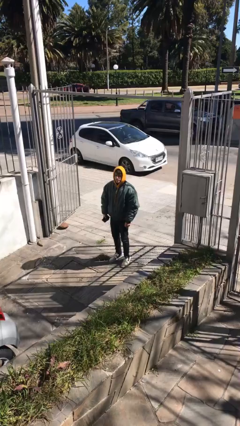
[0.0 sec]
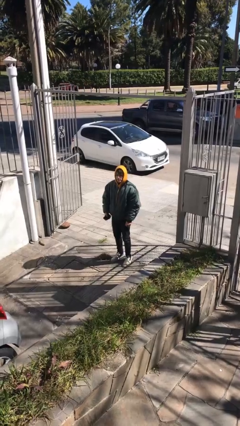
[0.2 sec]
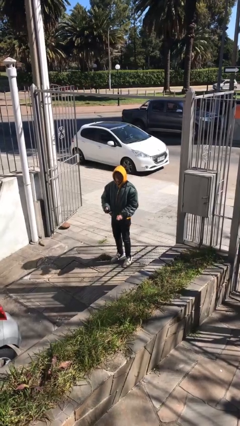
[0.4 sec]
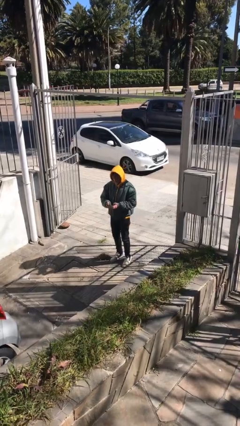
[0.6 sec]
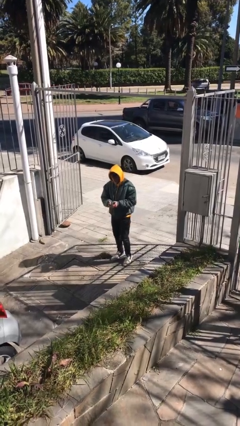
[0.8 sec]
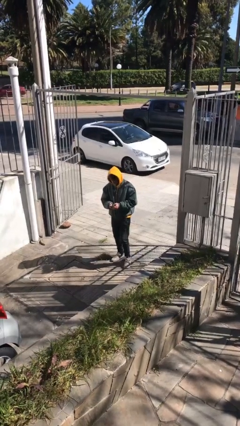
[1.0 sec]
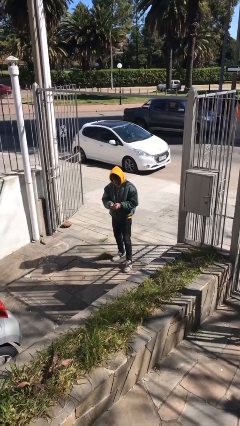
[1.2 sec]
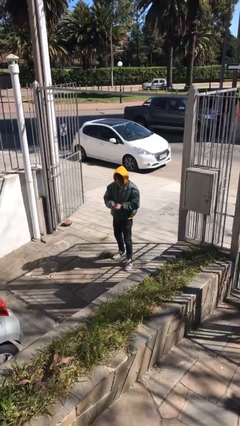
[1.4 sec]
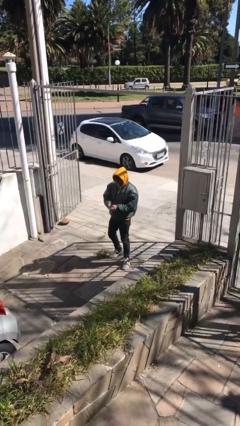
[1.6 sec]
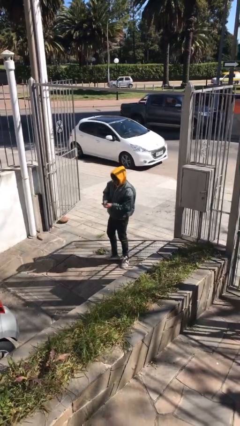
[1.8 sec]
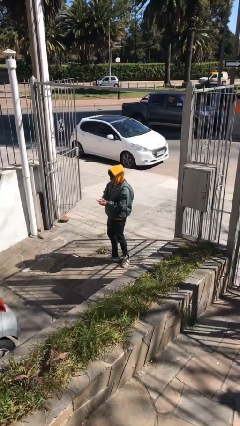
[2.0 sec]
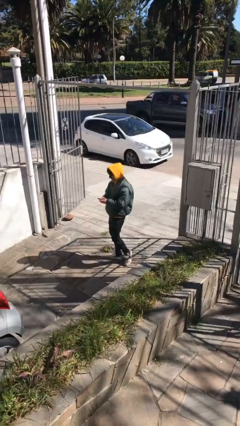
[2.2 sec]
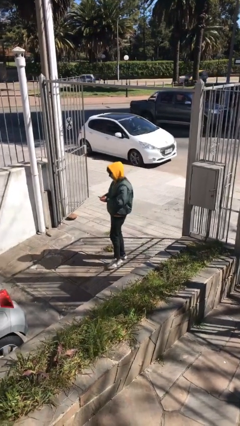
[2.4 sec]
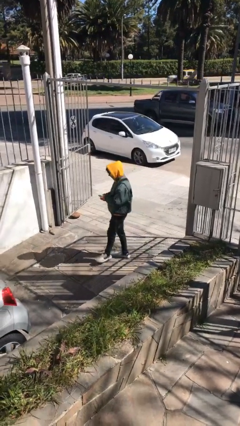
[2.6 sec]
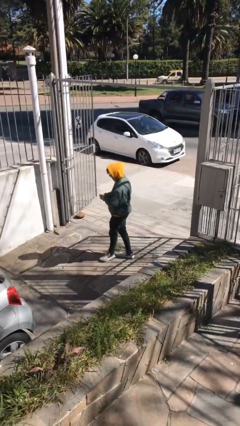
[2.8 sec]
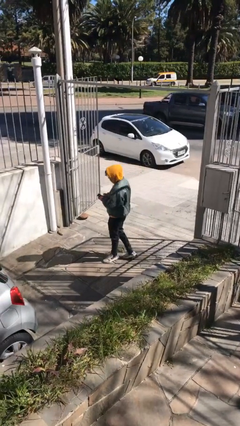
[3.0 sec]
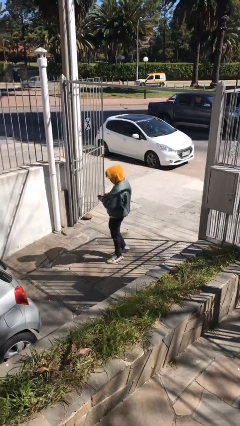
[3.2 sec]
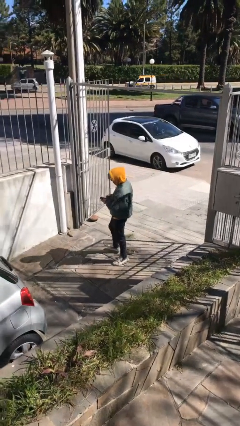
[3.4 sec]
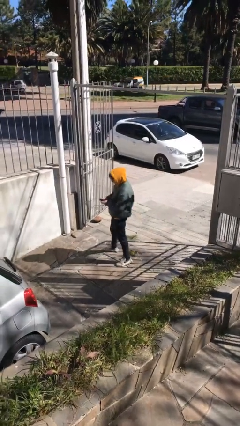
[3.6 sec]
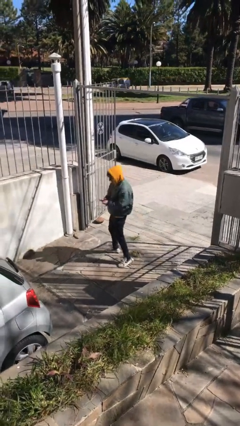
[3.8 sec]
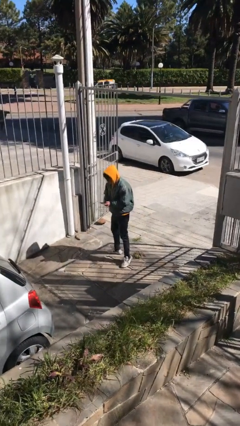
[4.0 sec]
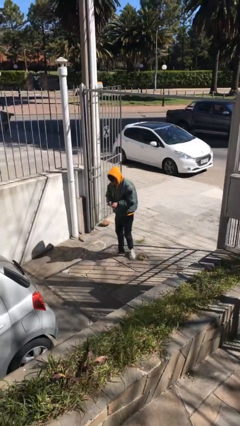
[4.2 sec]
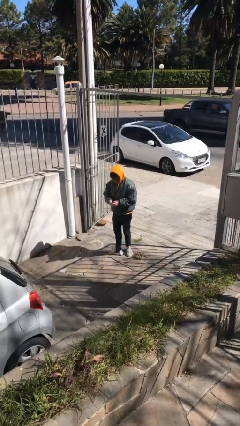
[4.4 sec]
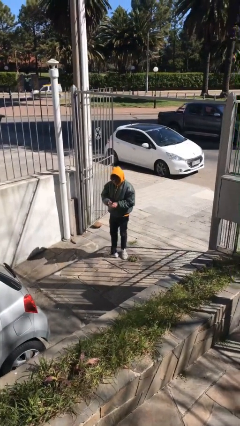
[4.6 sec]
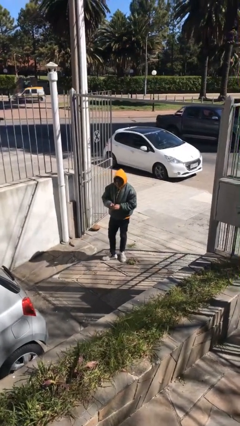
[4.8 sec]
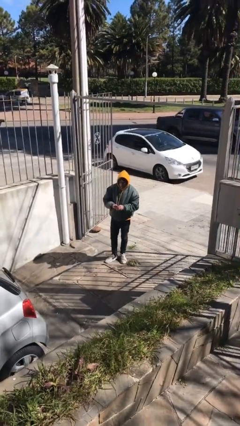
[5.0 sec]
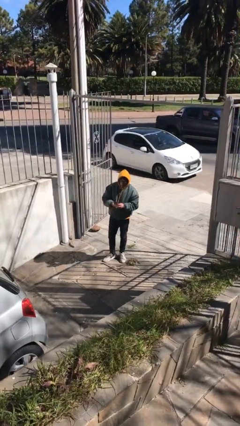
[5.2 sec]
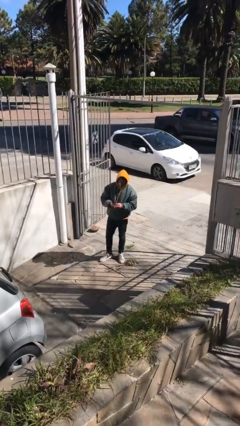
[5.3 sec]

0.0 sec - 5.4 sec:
person texts on phone

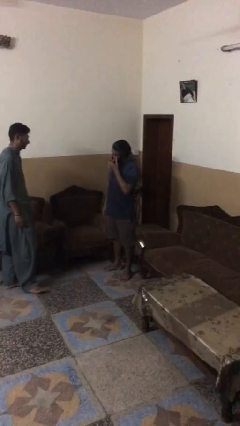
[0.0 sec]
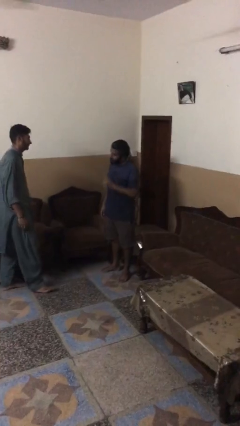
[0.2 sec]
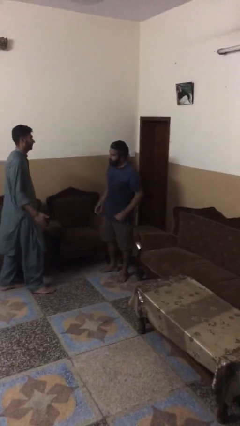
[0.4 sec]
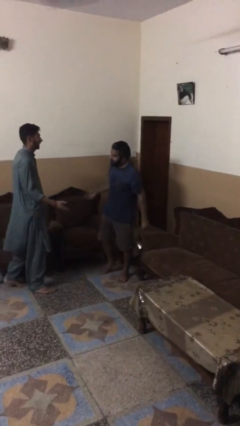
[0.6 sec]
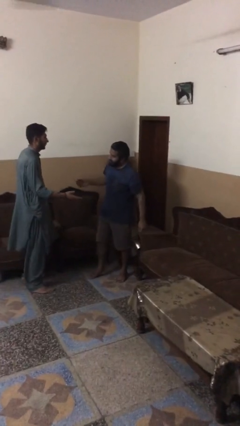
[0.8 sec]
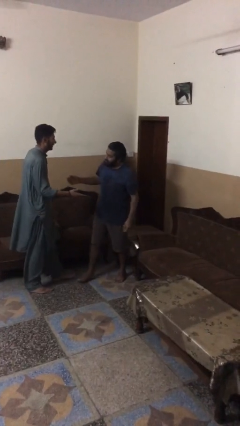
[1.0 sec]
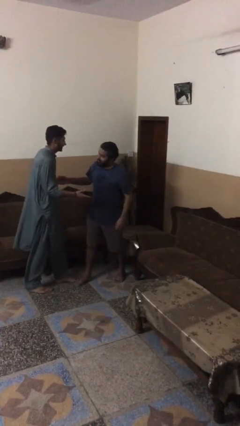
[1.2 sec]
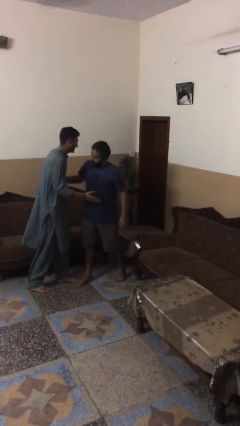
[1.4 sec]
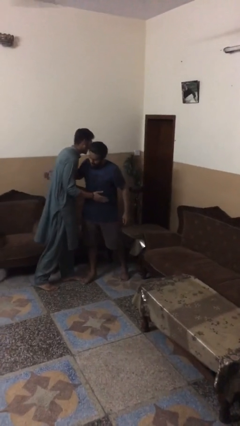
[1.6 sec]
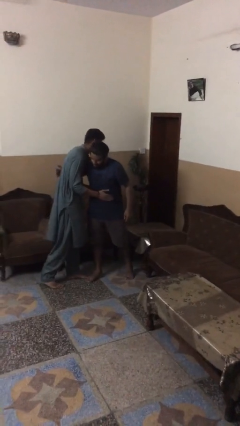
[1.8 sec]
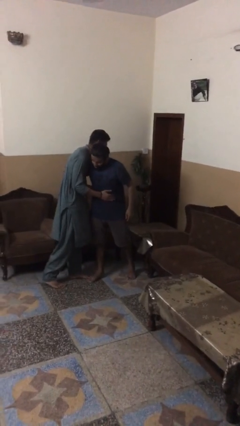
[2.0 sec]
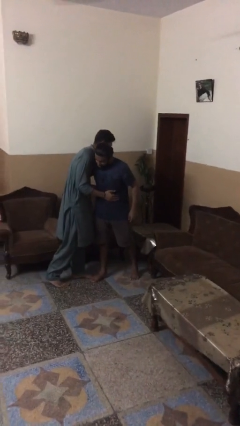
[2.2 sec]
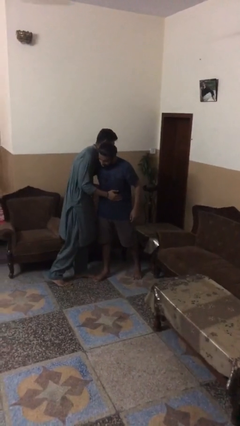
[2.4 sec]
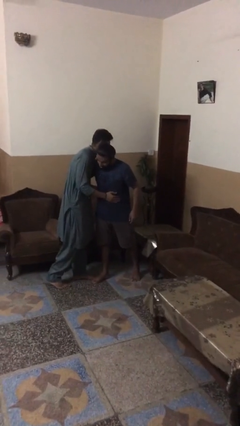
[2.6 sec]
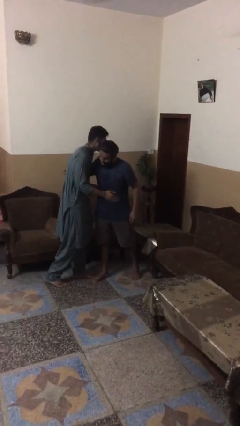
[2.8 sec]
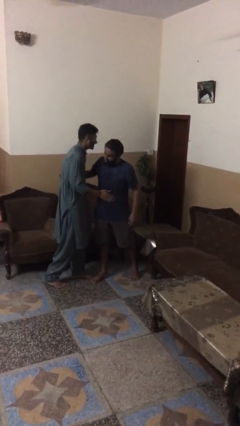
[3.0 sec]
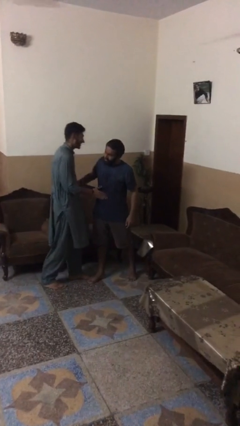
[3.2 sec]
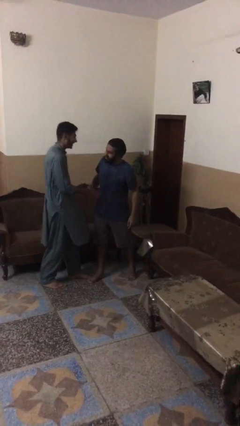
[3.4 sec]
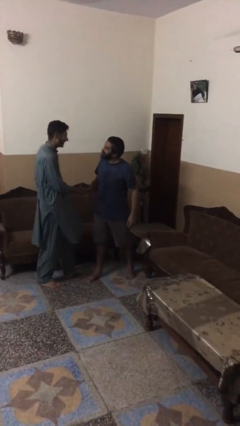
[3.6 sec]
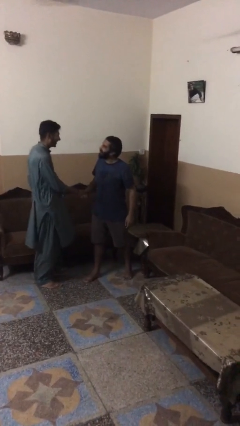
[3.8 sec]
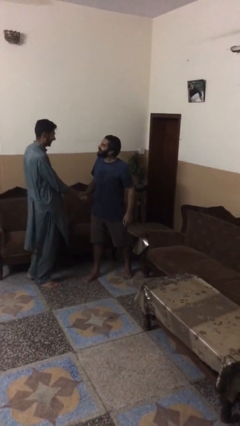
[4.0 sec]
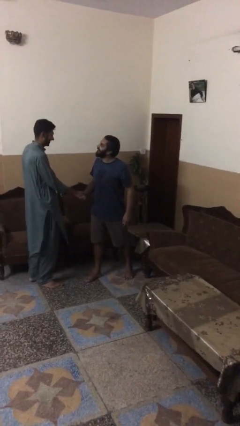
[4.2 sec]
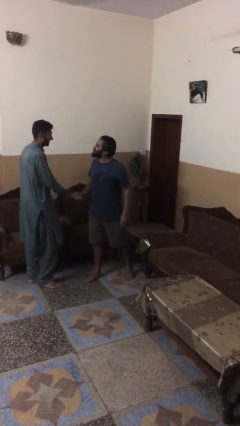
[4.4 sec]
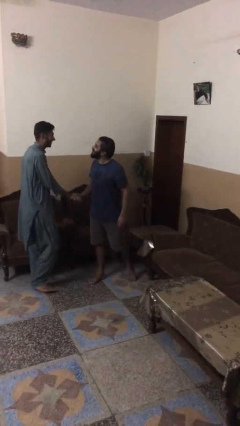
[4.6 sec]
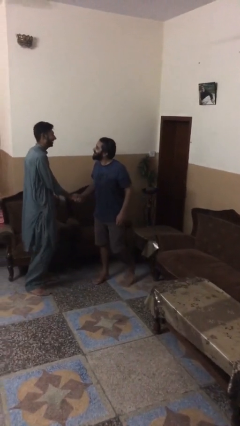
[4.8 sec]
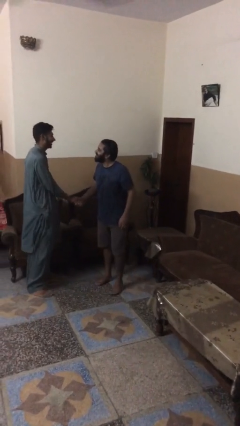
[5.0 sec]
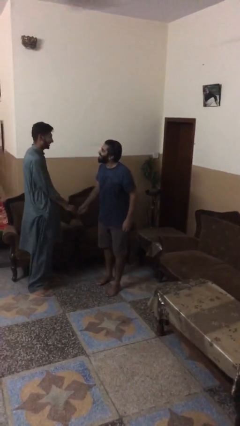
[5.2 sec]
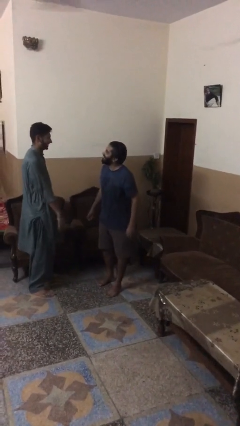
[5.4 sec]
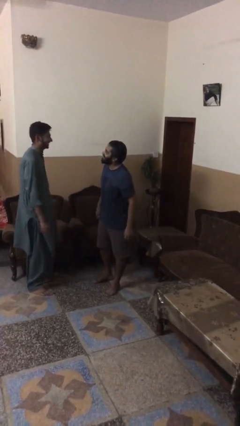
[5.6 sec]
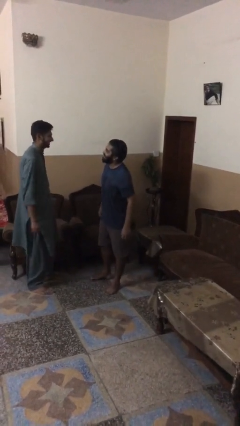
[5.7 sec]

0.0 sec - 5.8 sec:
person embraces person

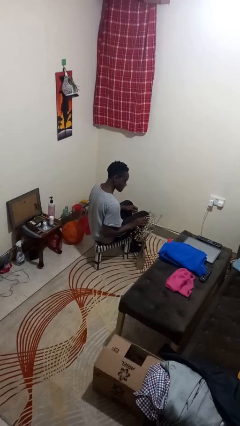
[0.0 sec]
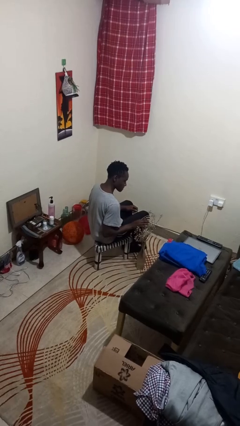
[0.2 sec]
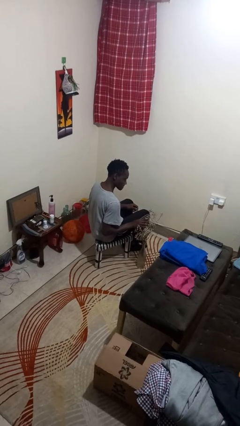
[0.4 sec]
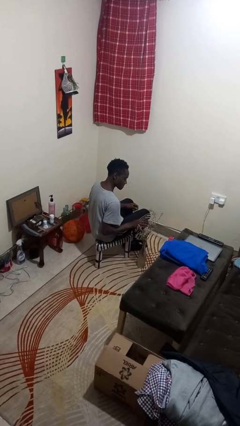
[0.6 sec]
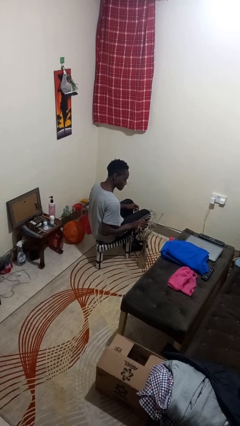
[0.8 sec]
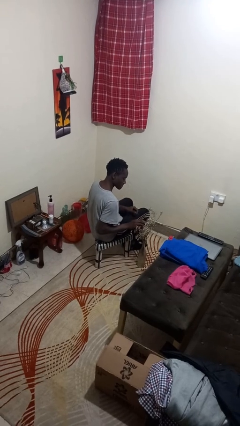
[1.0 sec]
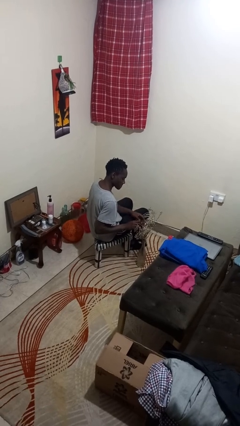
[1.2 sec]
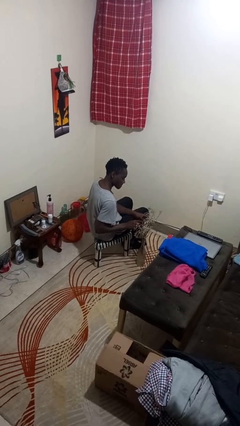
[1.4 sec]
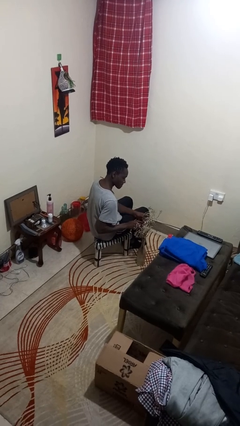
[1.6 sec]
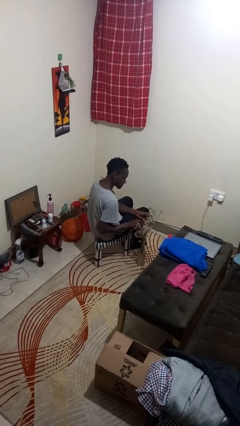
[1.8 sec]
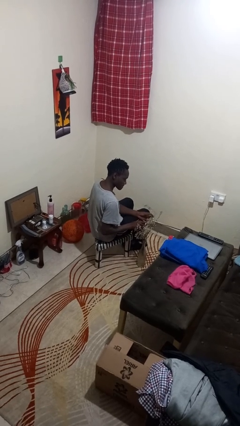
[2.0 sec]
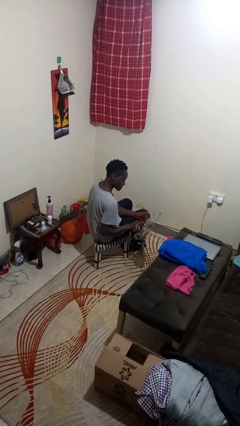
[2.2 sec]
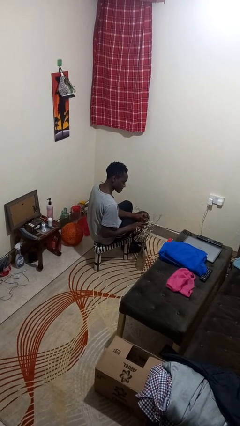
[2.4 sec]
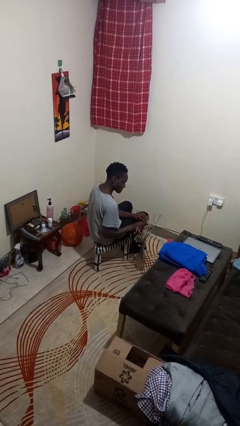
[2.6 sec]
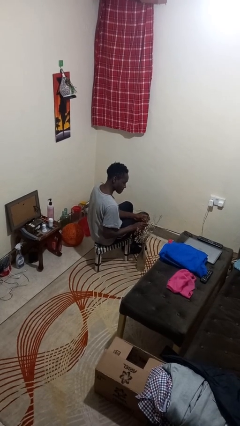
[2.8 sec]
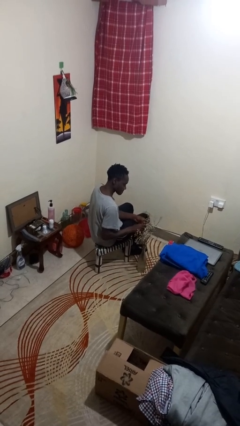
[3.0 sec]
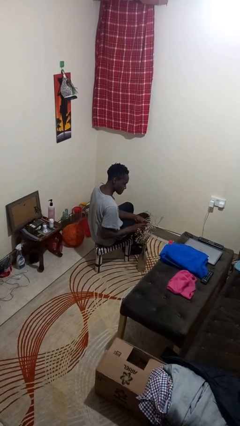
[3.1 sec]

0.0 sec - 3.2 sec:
person arranges flowers in vase

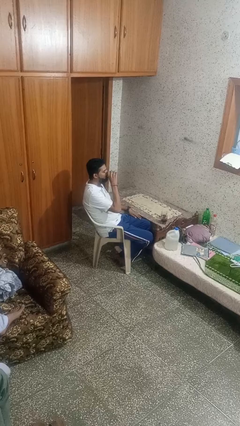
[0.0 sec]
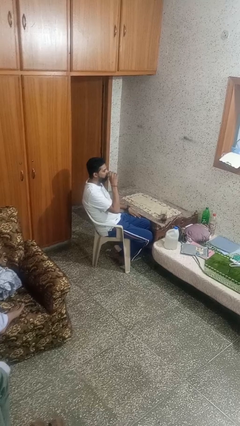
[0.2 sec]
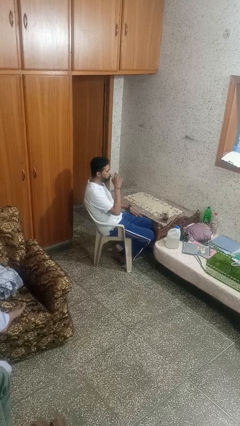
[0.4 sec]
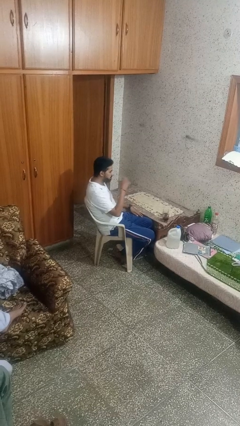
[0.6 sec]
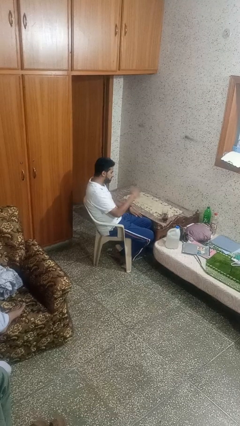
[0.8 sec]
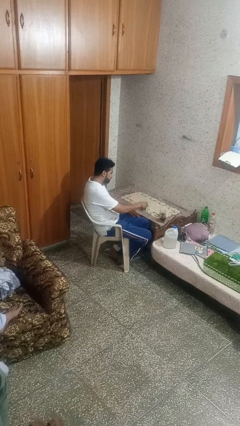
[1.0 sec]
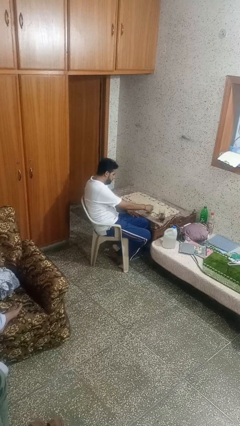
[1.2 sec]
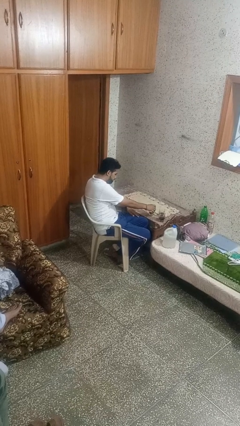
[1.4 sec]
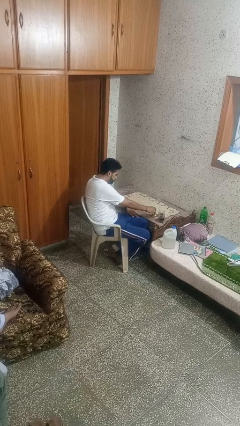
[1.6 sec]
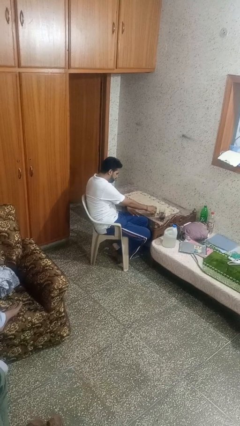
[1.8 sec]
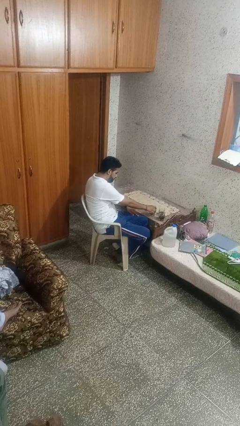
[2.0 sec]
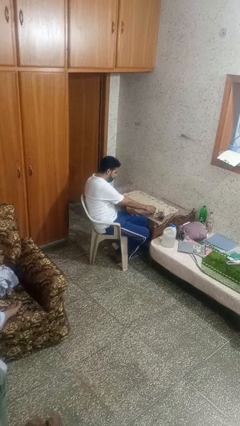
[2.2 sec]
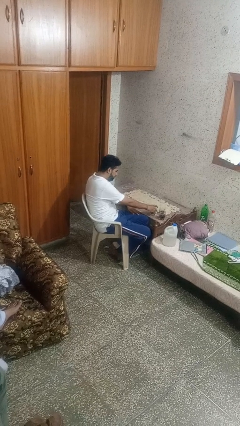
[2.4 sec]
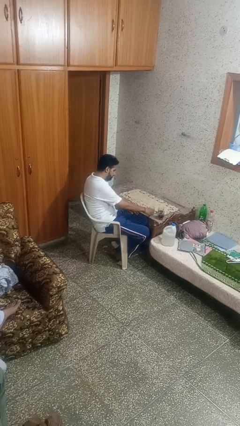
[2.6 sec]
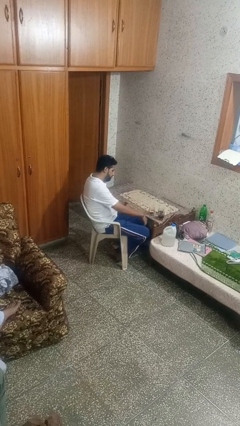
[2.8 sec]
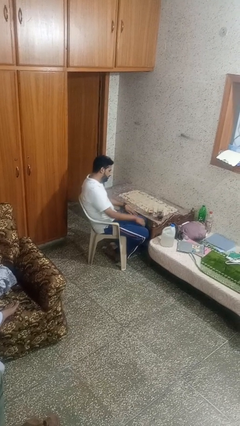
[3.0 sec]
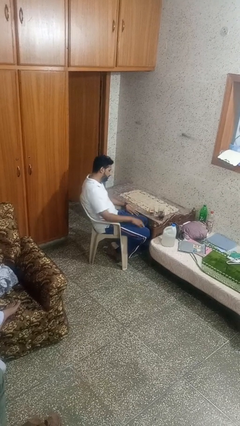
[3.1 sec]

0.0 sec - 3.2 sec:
person puts down object on table
